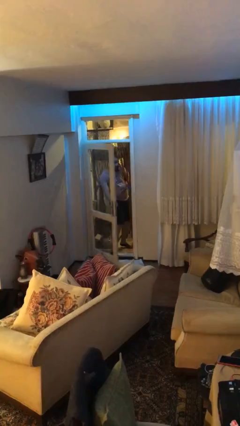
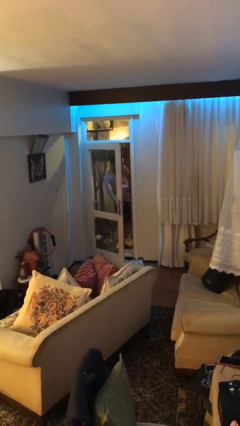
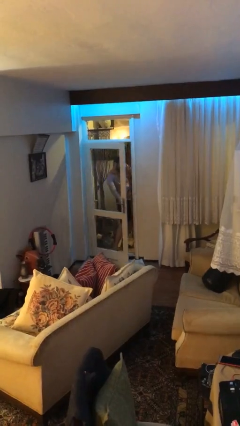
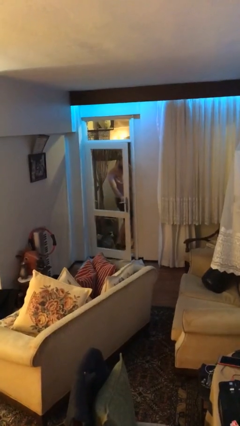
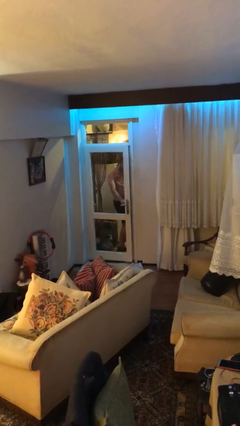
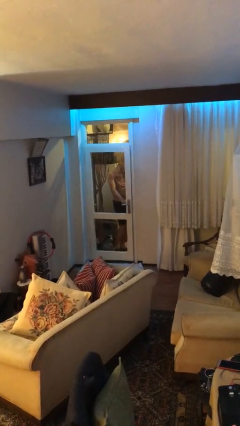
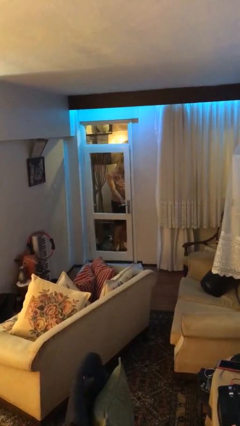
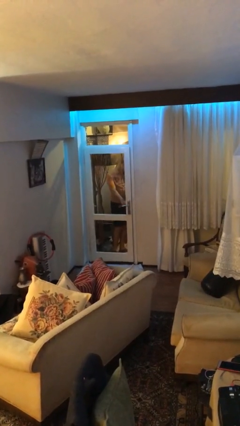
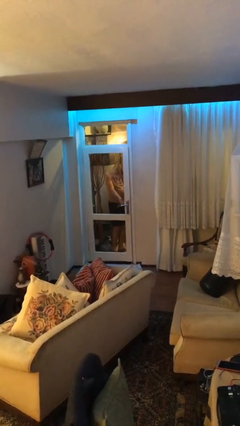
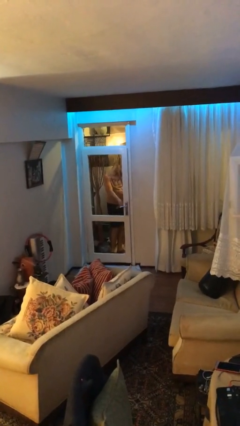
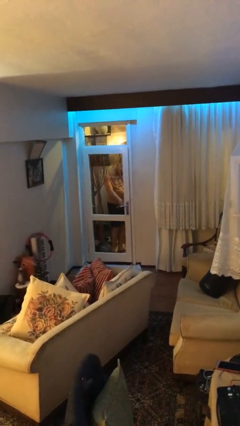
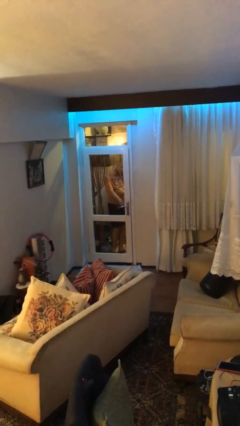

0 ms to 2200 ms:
person closes facility door

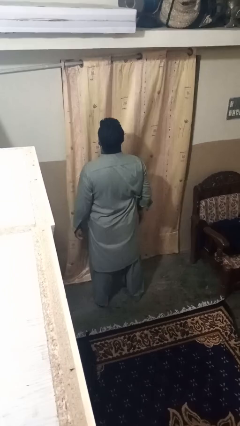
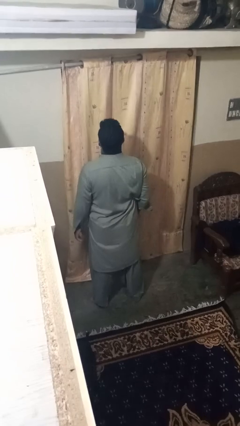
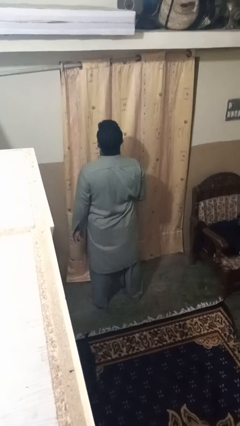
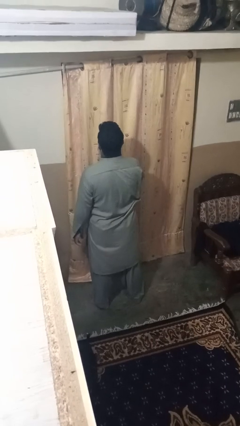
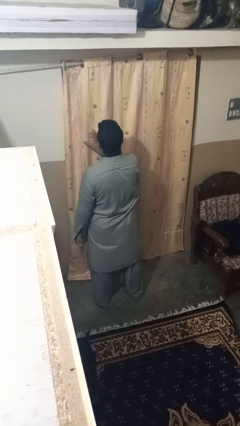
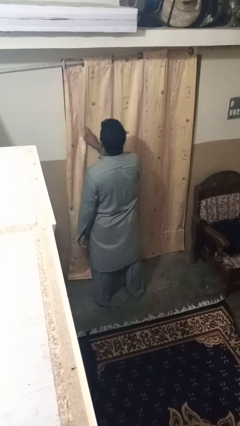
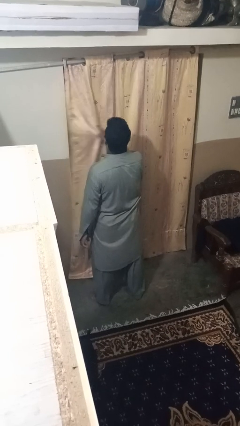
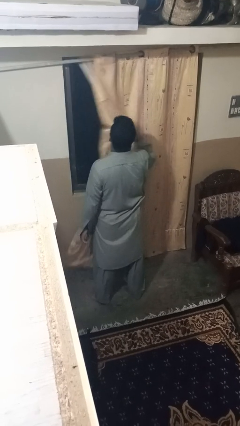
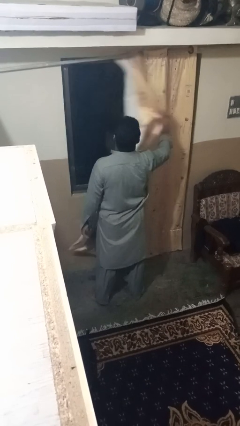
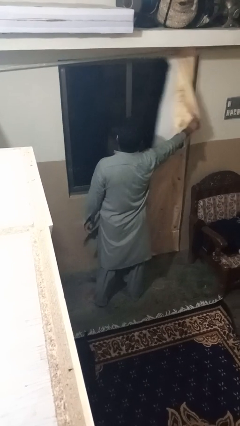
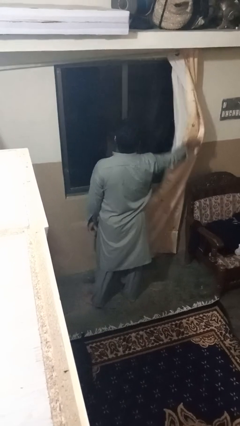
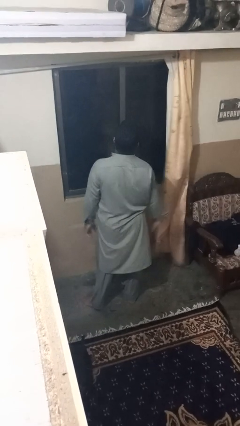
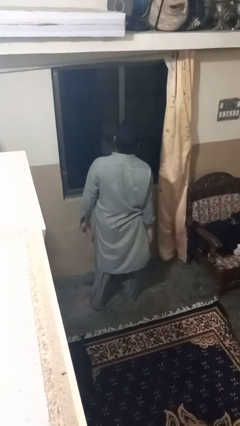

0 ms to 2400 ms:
person opens curtains

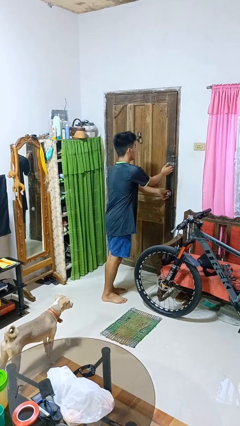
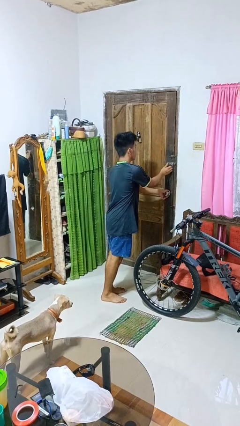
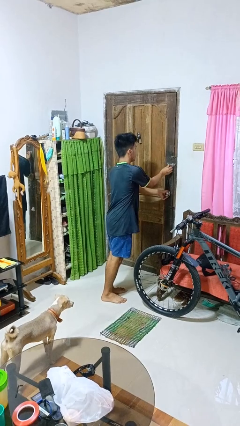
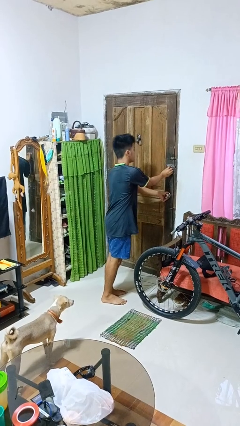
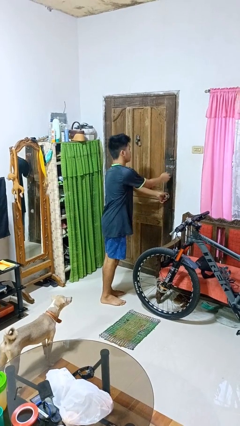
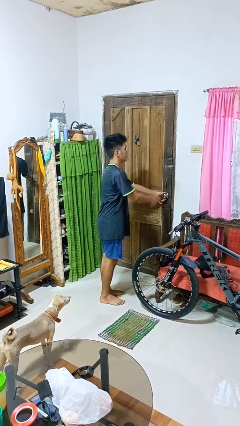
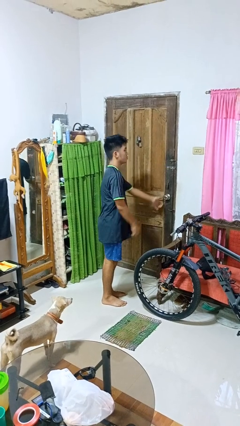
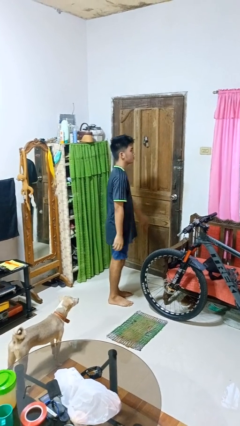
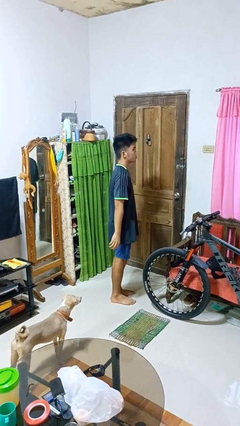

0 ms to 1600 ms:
person locks door with keys

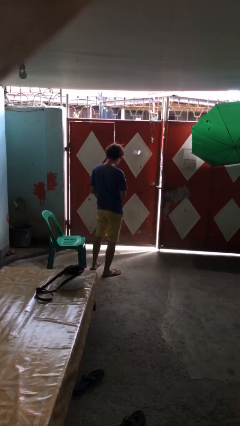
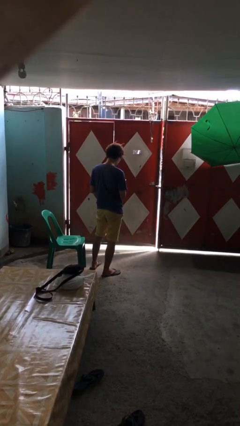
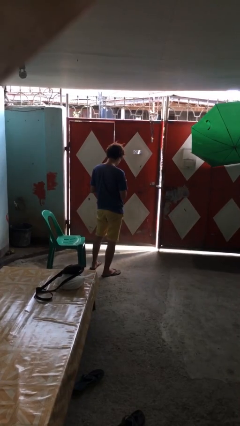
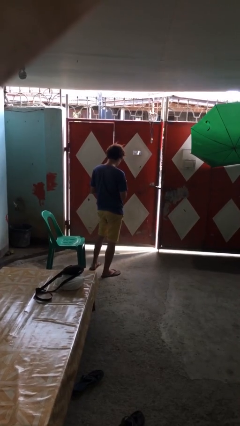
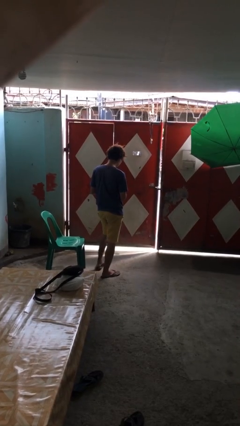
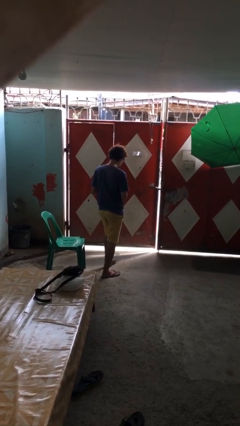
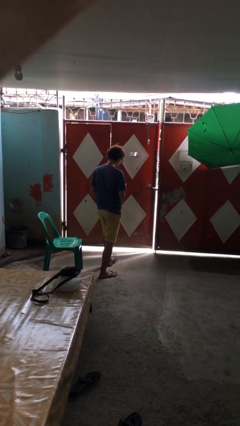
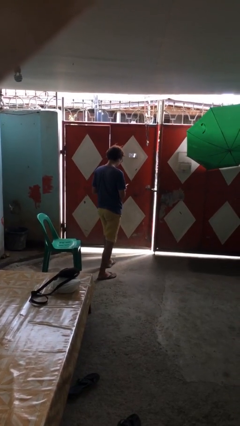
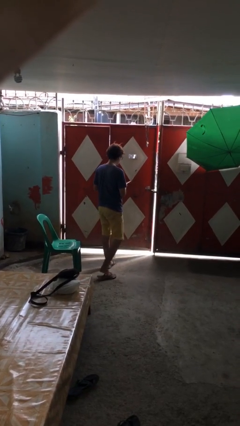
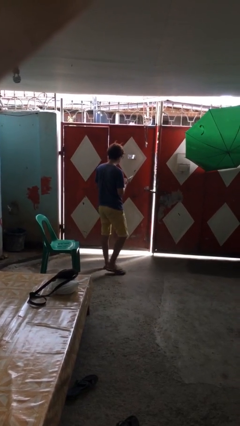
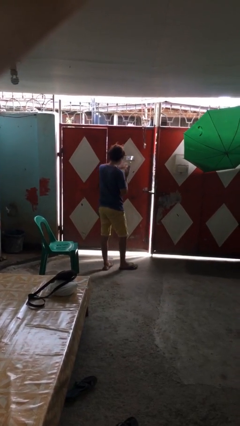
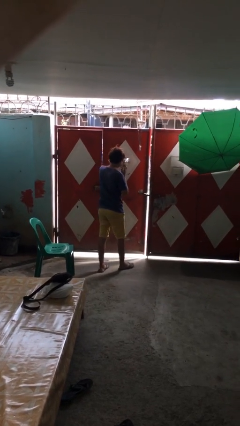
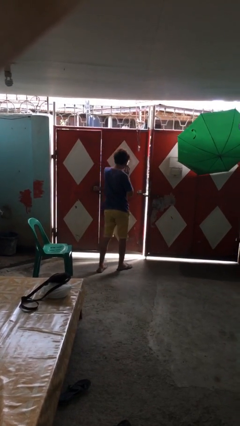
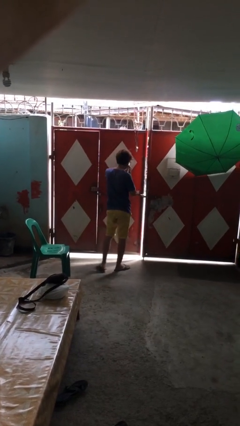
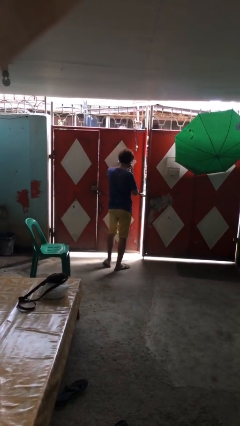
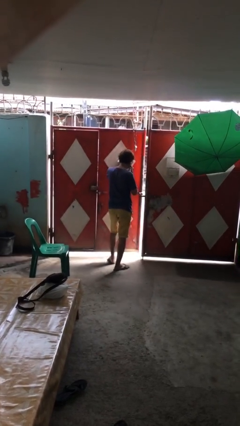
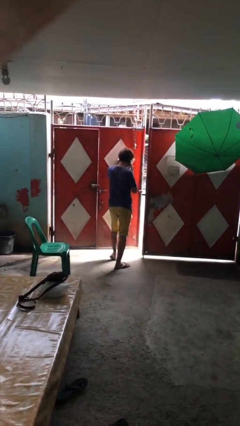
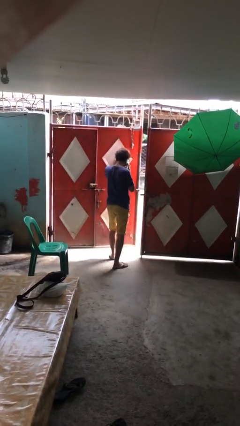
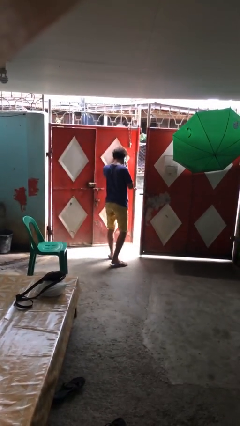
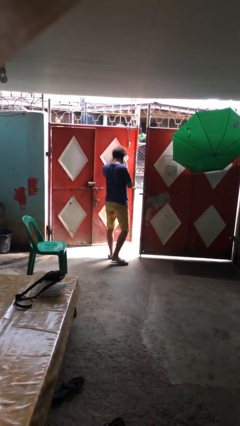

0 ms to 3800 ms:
person opens facility door

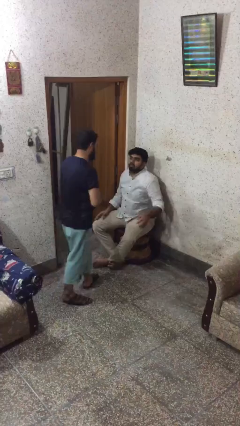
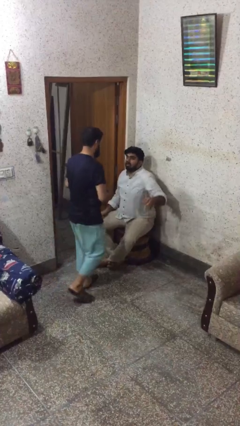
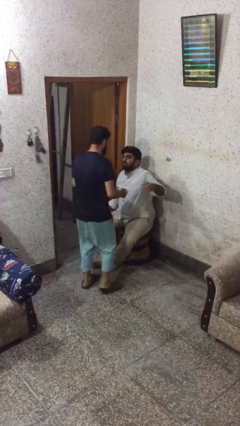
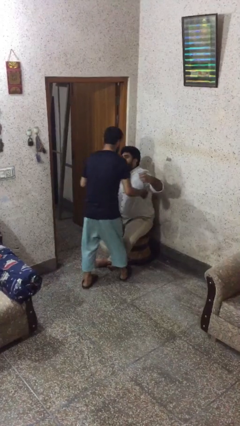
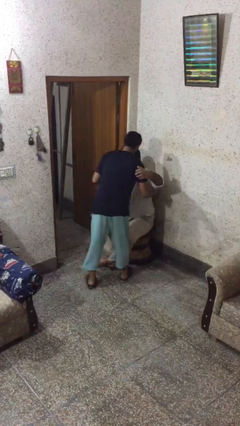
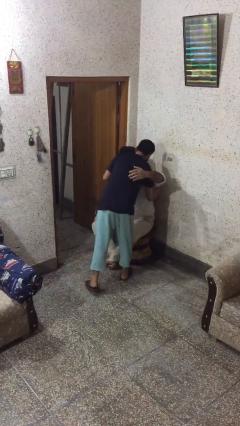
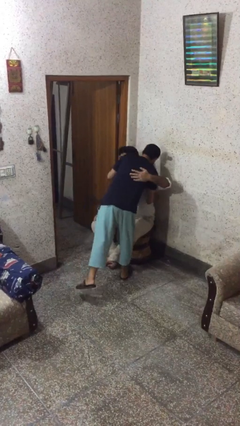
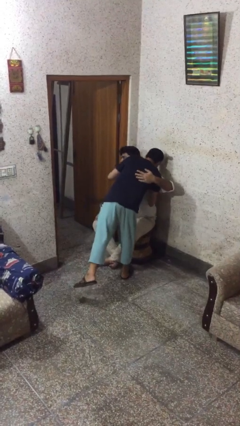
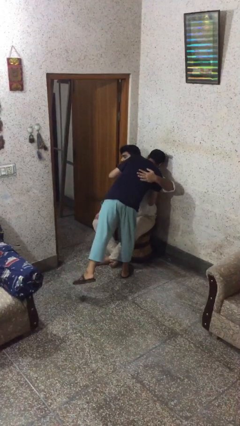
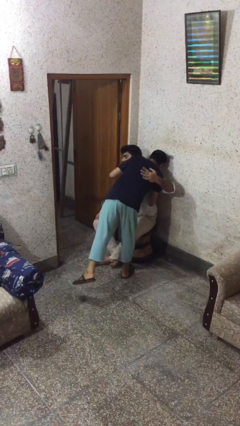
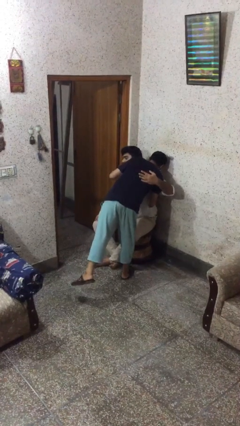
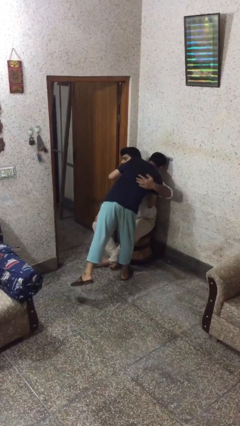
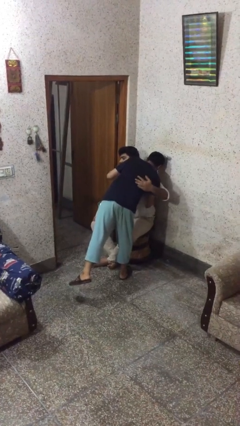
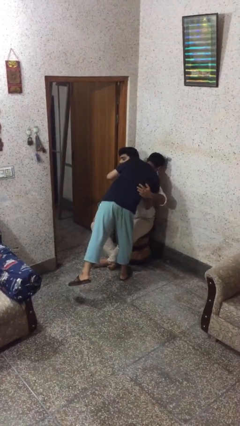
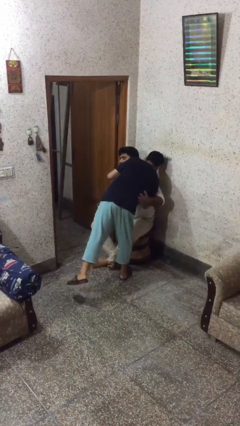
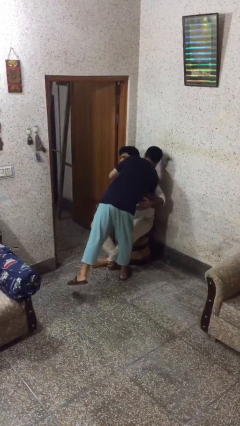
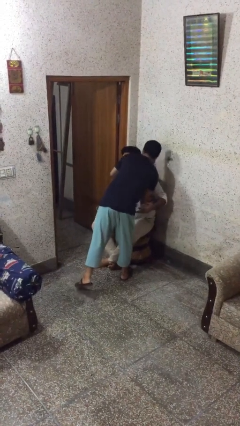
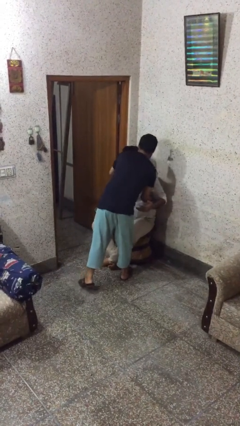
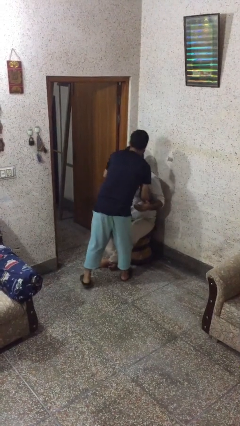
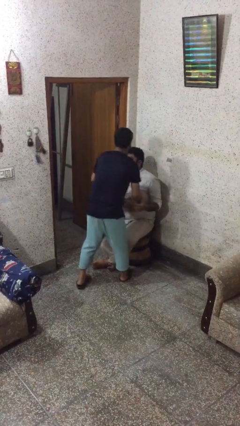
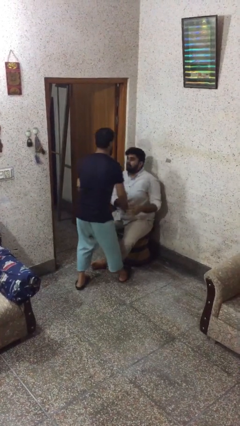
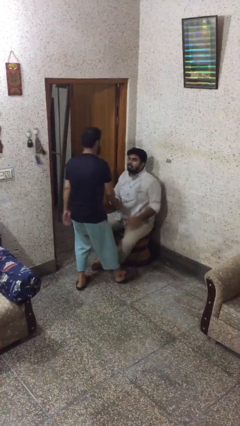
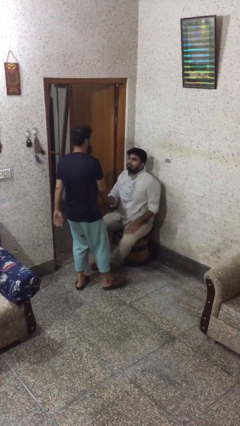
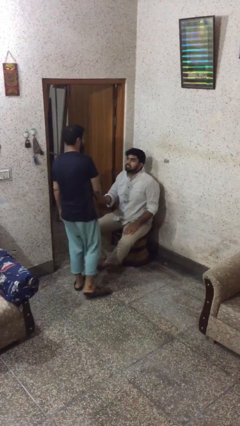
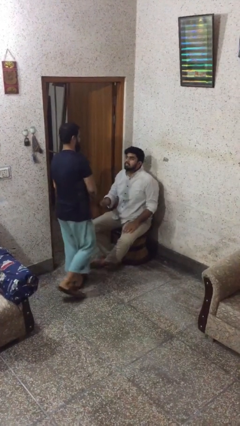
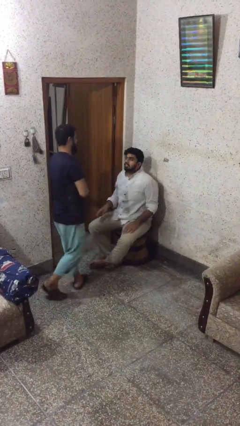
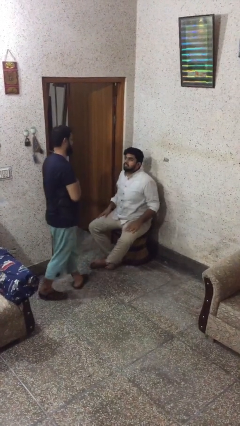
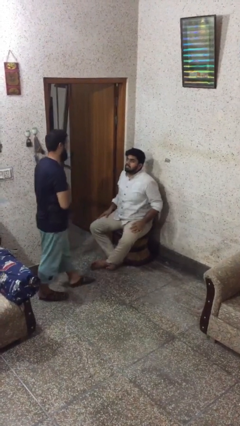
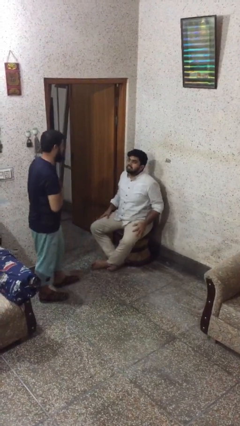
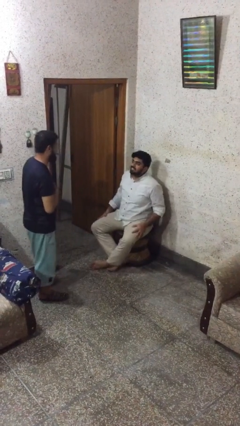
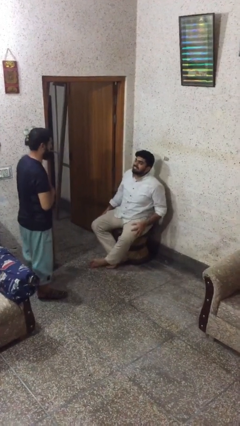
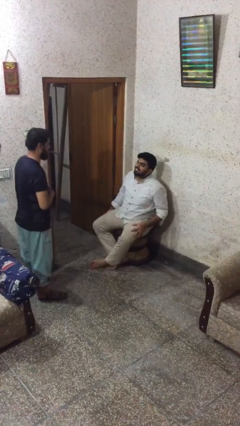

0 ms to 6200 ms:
person embraces person

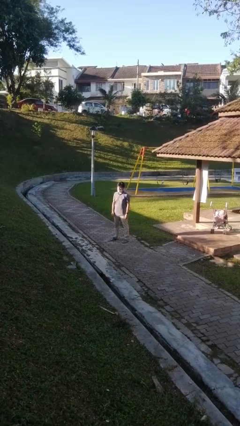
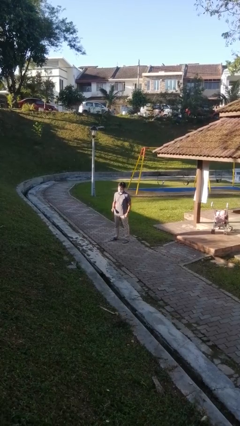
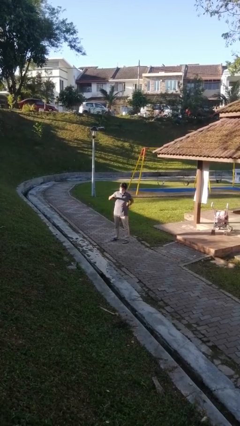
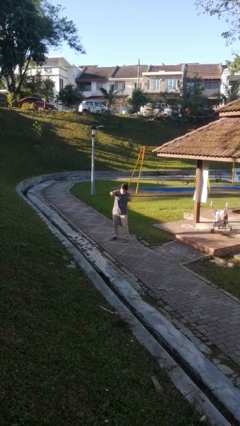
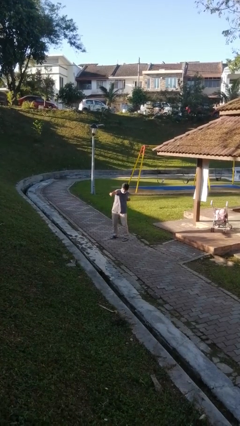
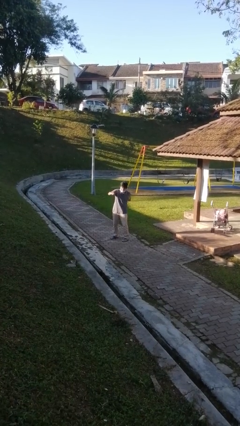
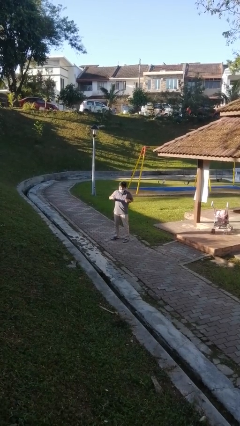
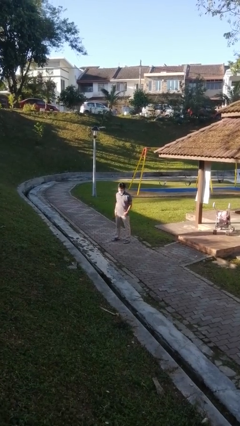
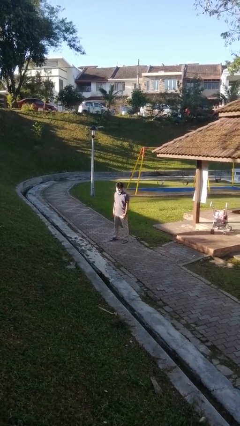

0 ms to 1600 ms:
person punches
